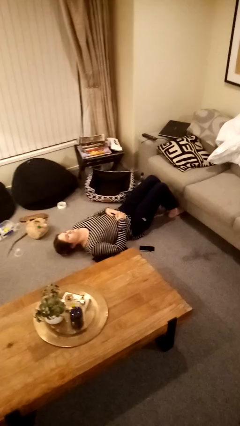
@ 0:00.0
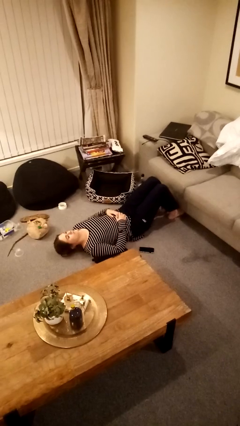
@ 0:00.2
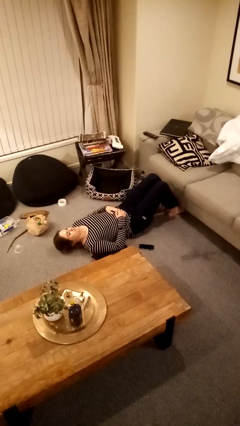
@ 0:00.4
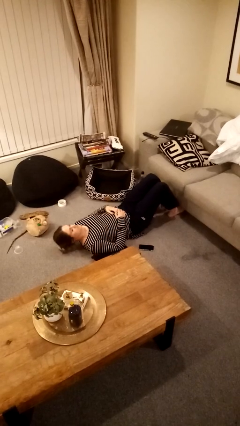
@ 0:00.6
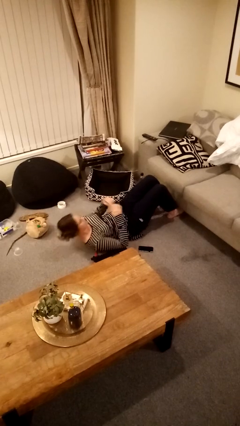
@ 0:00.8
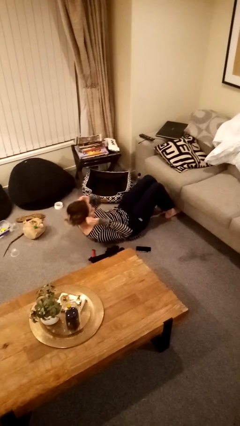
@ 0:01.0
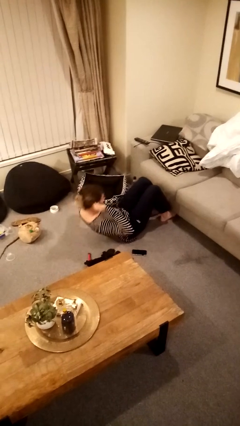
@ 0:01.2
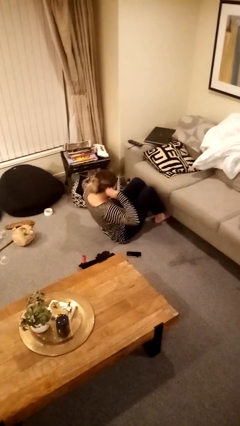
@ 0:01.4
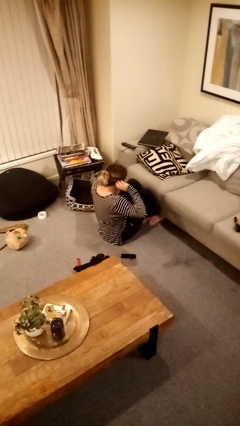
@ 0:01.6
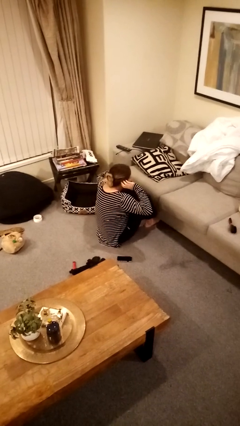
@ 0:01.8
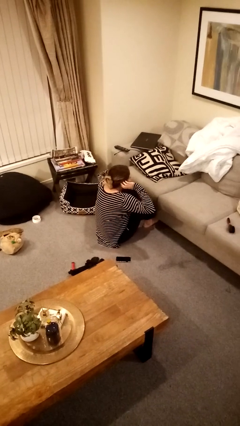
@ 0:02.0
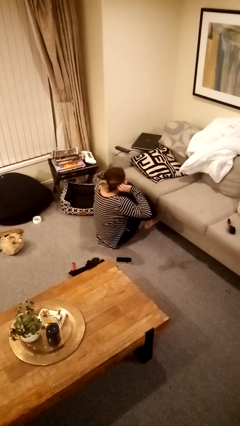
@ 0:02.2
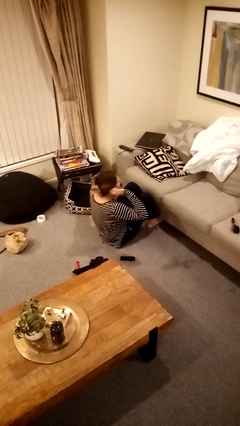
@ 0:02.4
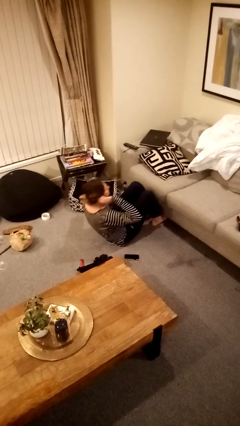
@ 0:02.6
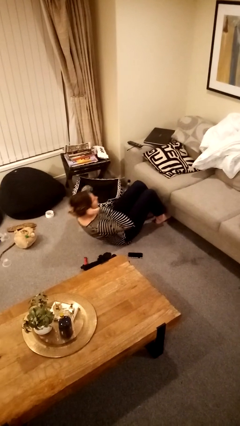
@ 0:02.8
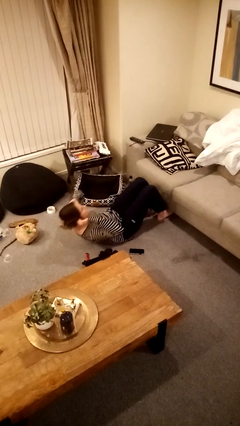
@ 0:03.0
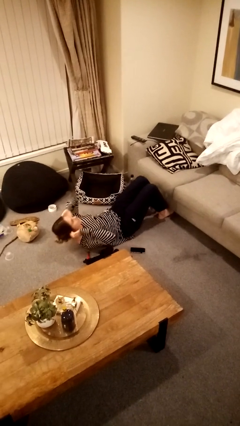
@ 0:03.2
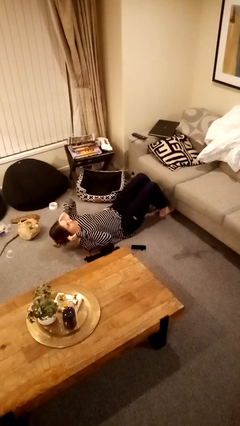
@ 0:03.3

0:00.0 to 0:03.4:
person exercises with situp

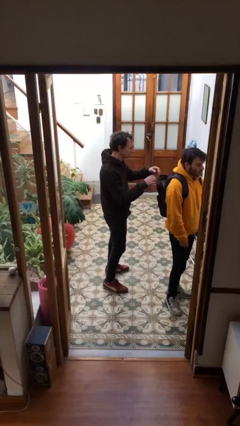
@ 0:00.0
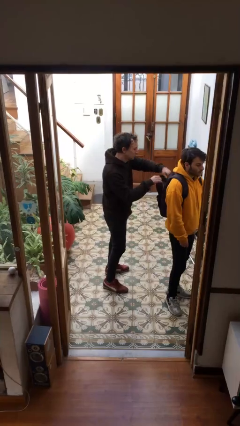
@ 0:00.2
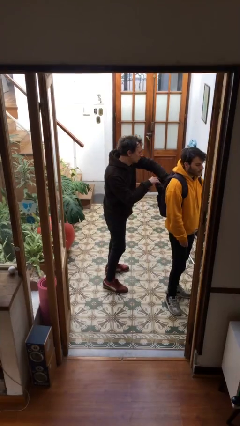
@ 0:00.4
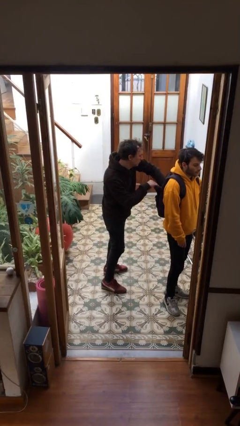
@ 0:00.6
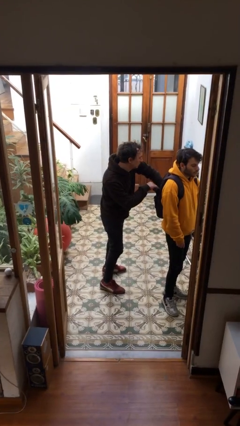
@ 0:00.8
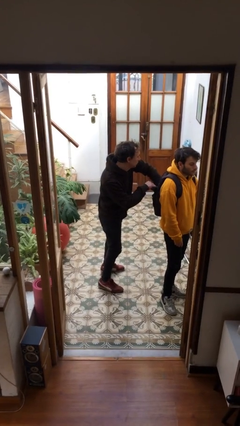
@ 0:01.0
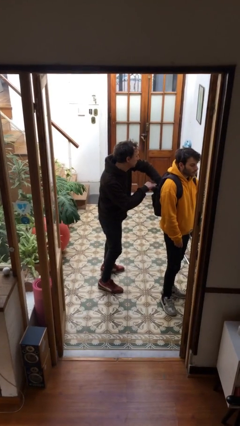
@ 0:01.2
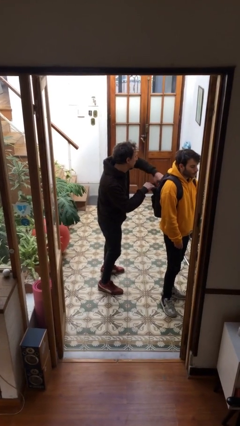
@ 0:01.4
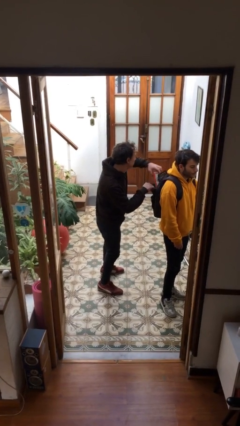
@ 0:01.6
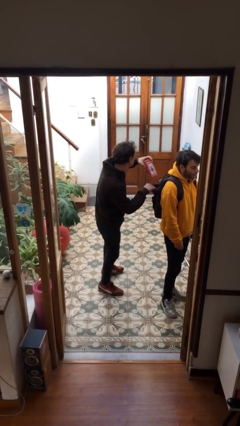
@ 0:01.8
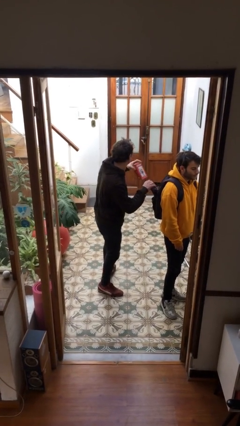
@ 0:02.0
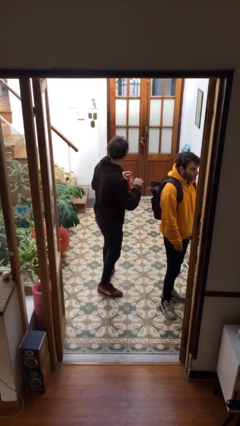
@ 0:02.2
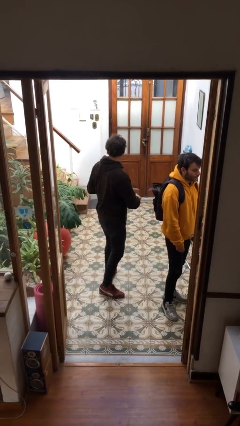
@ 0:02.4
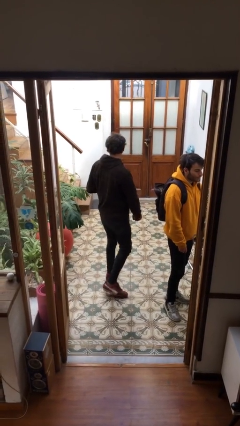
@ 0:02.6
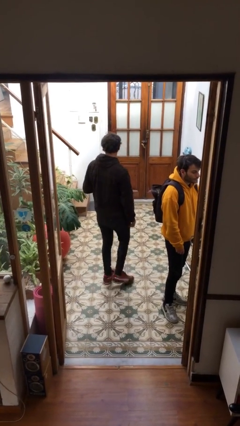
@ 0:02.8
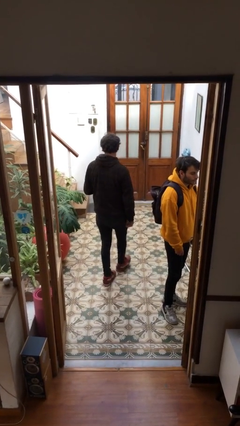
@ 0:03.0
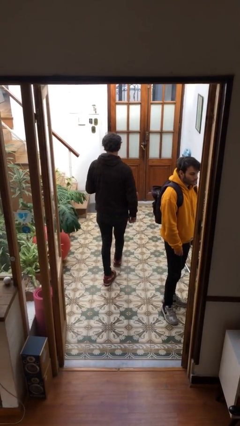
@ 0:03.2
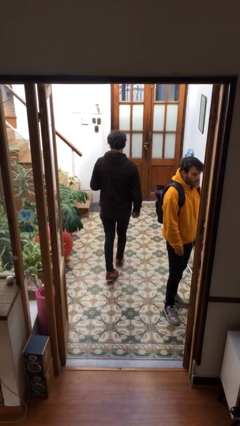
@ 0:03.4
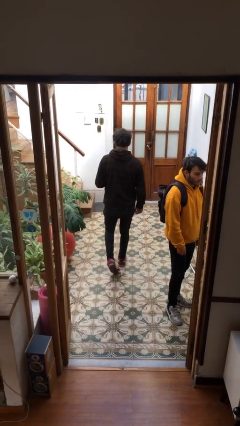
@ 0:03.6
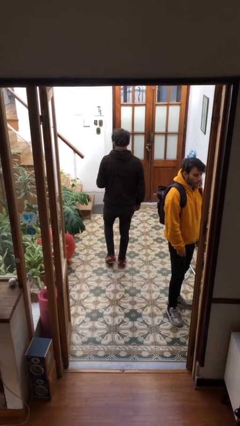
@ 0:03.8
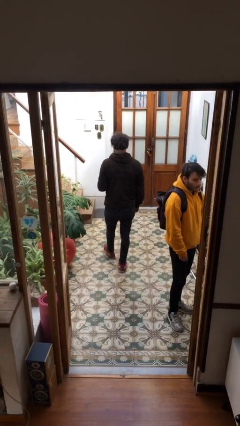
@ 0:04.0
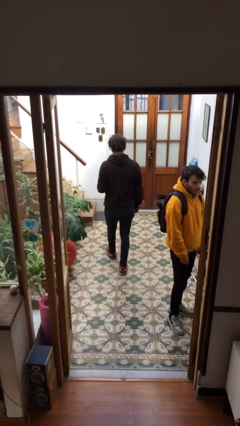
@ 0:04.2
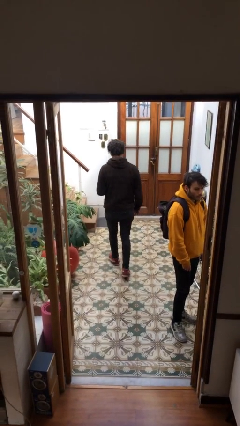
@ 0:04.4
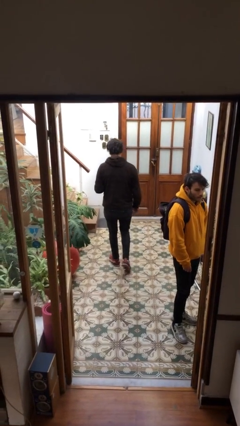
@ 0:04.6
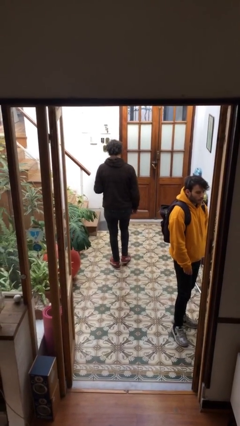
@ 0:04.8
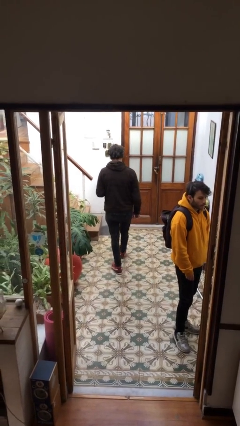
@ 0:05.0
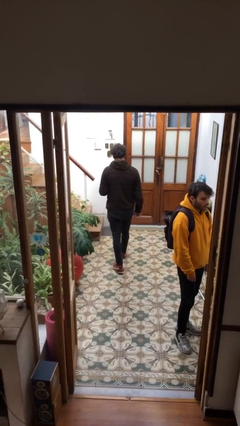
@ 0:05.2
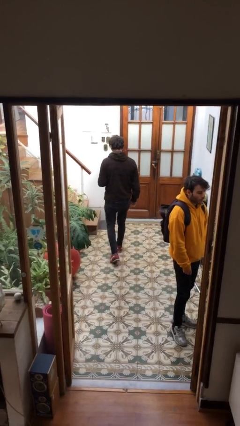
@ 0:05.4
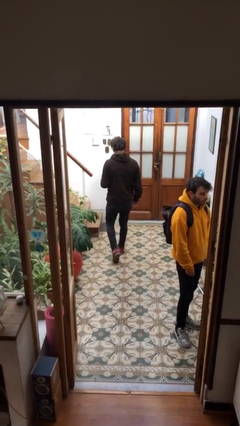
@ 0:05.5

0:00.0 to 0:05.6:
person steals object from person

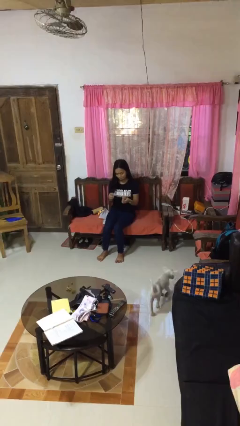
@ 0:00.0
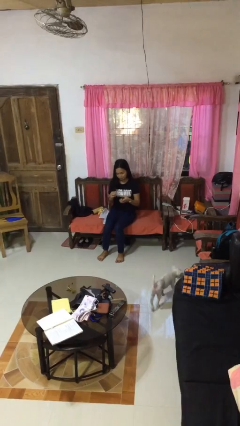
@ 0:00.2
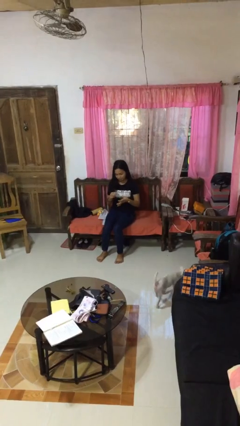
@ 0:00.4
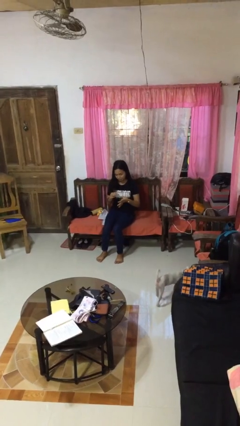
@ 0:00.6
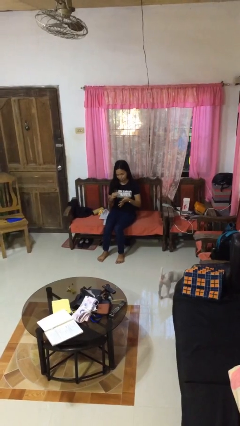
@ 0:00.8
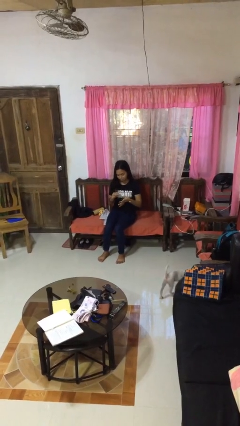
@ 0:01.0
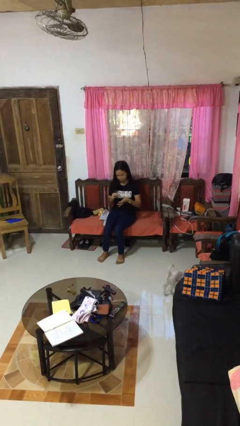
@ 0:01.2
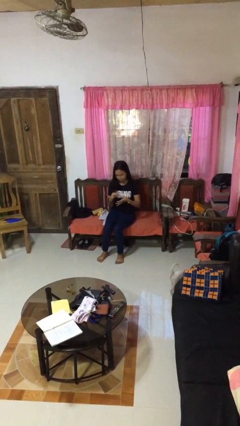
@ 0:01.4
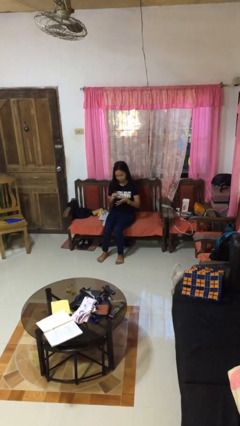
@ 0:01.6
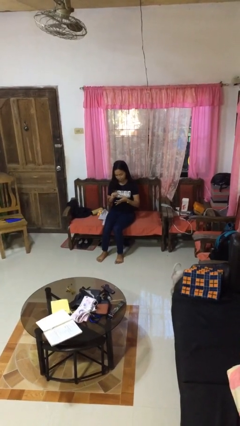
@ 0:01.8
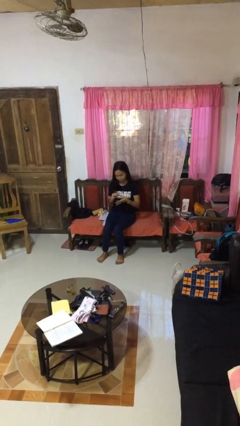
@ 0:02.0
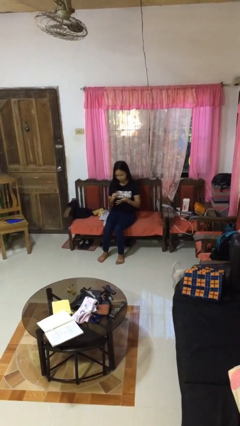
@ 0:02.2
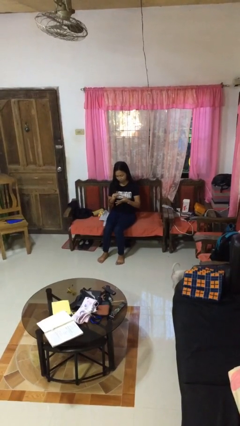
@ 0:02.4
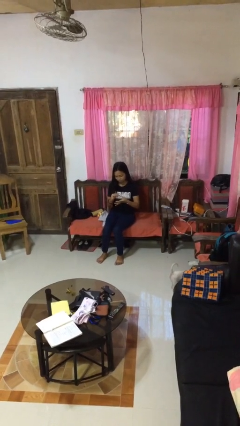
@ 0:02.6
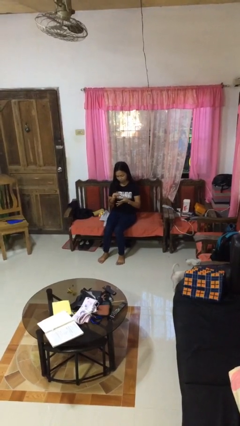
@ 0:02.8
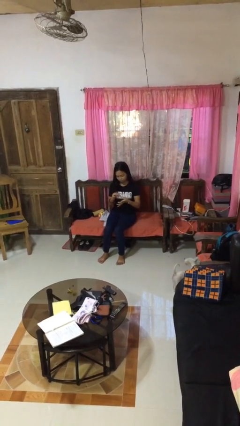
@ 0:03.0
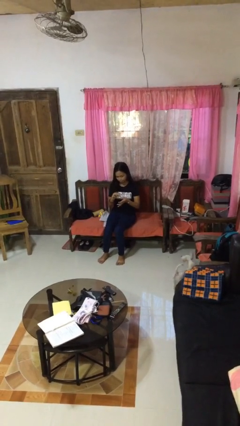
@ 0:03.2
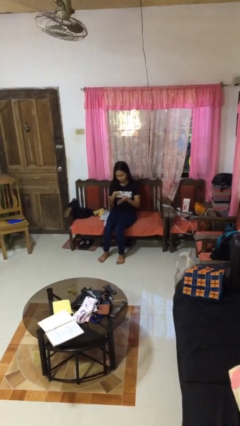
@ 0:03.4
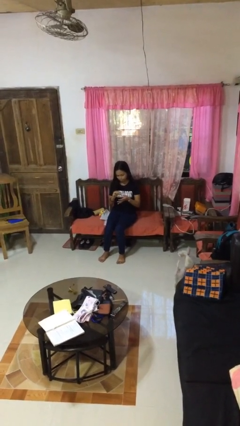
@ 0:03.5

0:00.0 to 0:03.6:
person clips fingernails

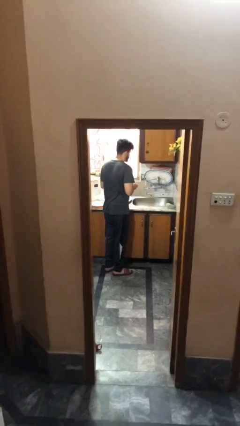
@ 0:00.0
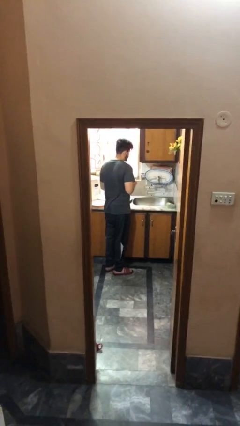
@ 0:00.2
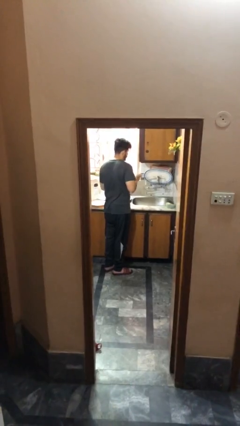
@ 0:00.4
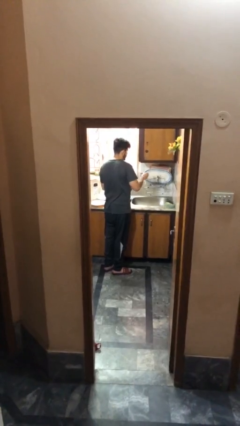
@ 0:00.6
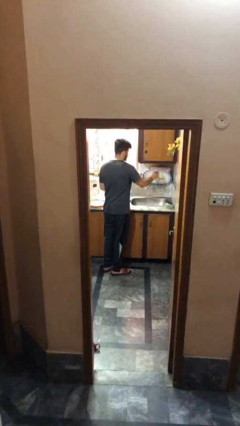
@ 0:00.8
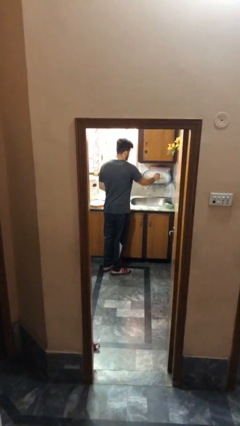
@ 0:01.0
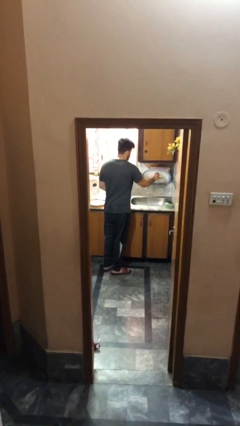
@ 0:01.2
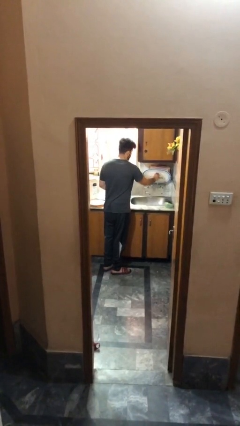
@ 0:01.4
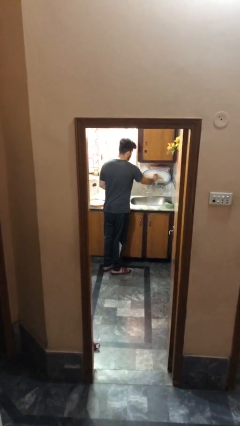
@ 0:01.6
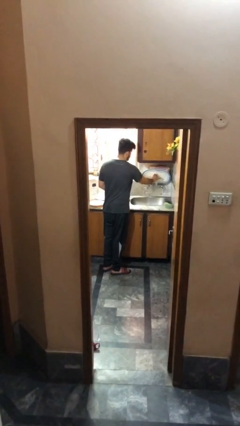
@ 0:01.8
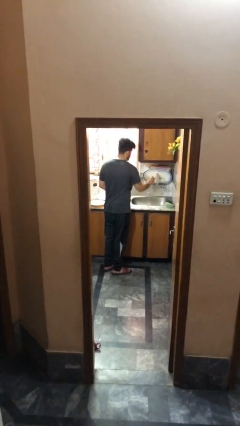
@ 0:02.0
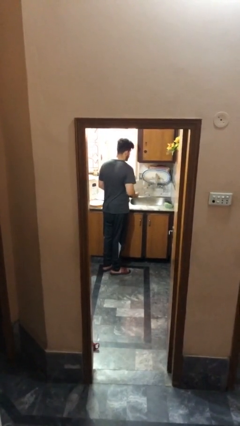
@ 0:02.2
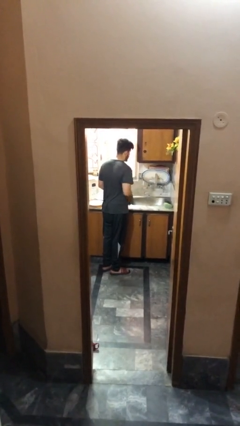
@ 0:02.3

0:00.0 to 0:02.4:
person loads dishwasher

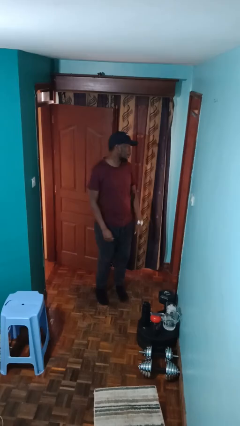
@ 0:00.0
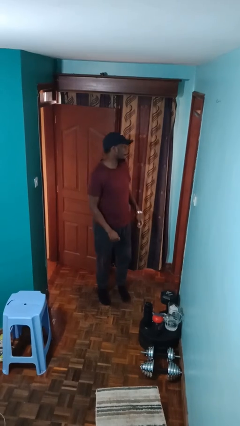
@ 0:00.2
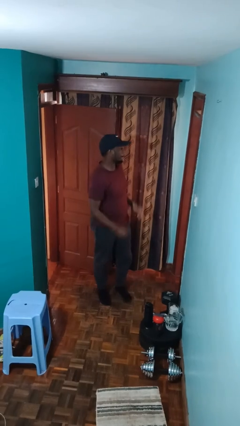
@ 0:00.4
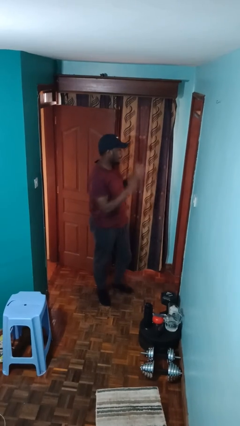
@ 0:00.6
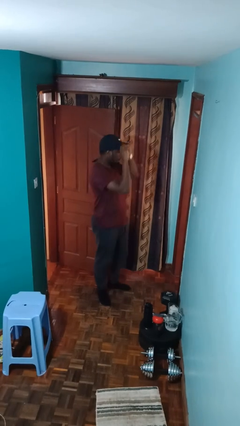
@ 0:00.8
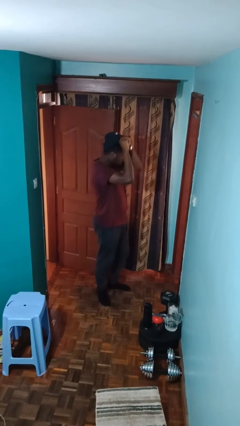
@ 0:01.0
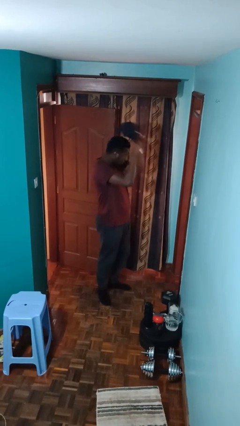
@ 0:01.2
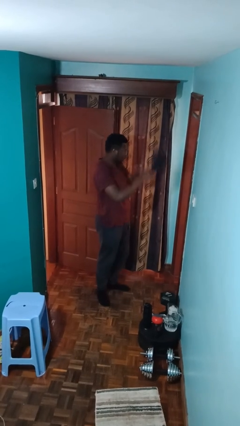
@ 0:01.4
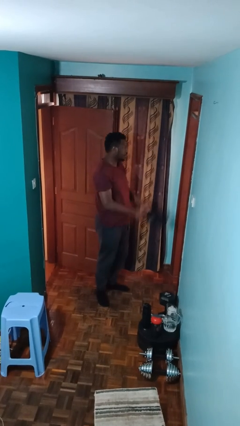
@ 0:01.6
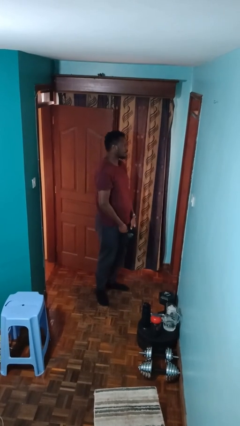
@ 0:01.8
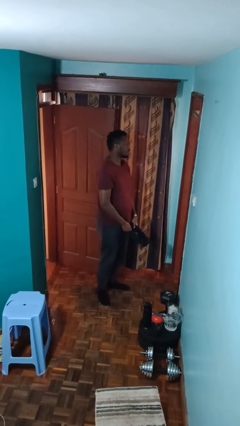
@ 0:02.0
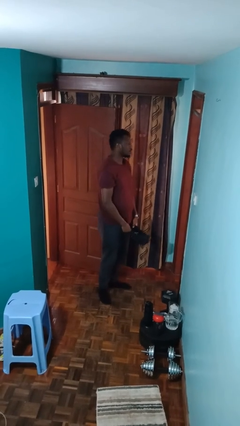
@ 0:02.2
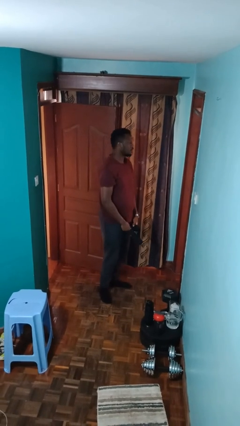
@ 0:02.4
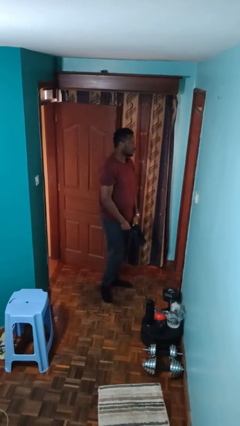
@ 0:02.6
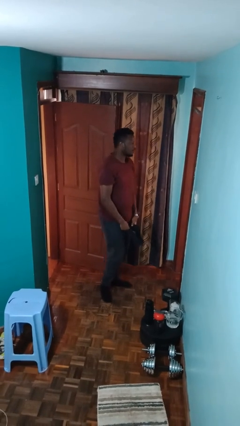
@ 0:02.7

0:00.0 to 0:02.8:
person takes off hat
